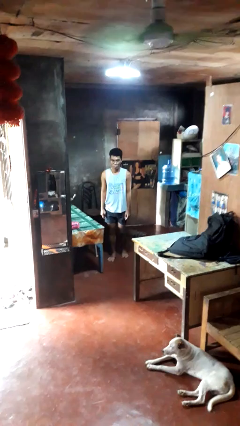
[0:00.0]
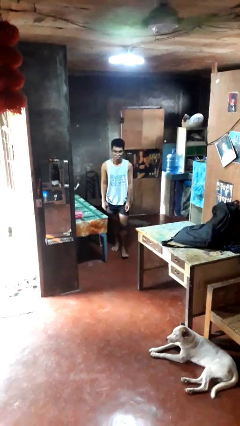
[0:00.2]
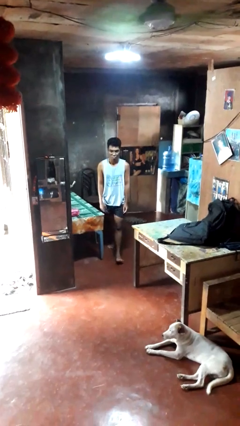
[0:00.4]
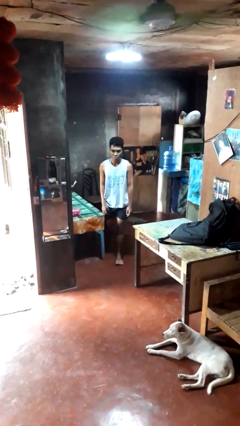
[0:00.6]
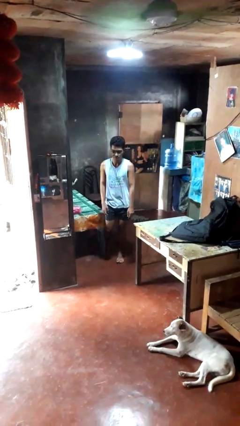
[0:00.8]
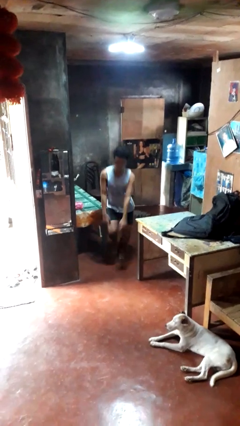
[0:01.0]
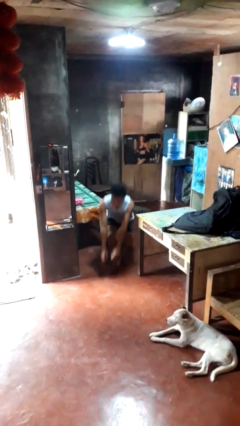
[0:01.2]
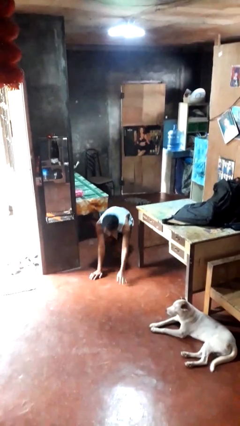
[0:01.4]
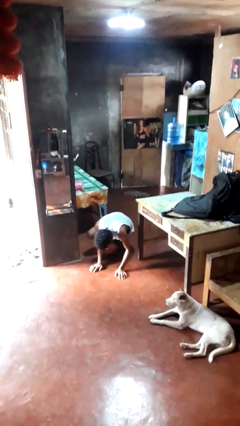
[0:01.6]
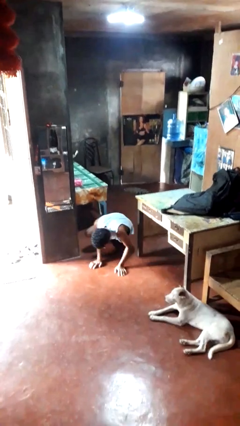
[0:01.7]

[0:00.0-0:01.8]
person trips on object on floor

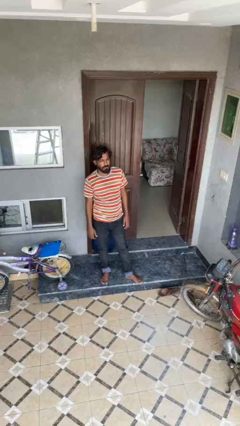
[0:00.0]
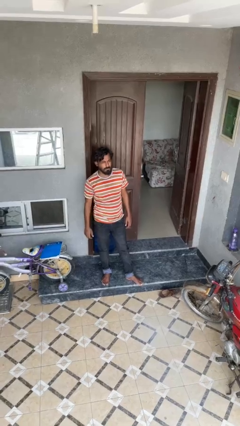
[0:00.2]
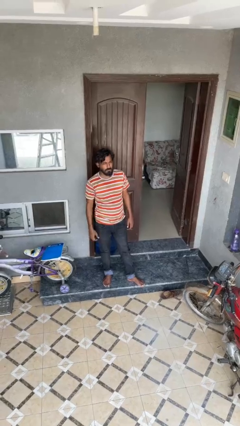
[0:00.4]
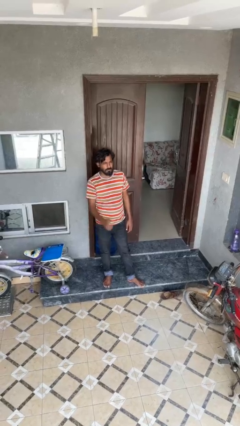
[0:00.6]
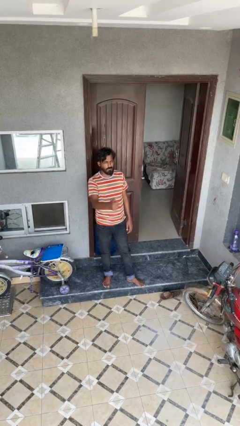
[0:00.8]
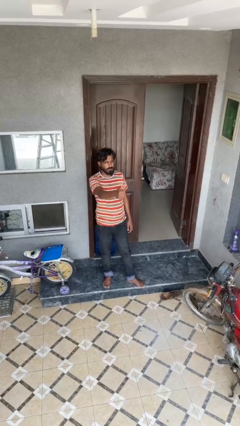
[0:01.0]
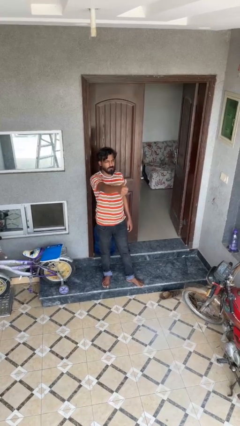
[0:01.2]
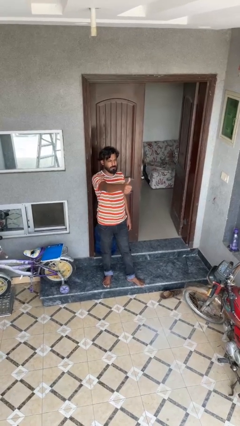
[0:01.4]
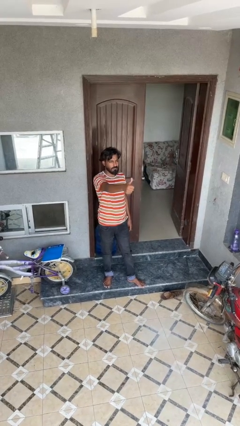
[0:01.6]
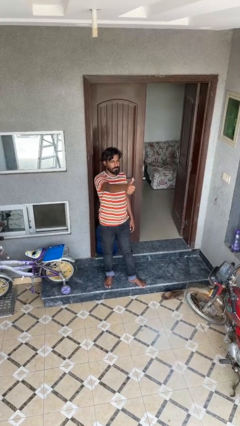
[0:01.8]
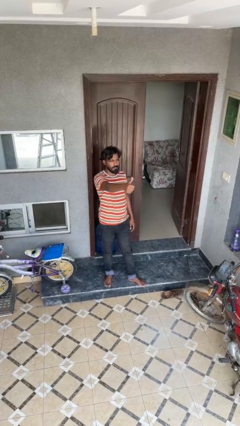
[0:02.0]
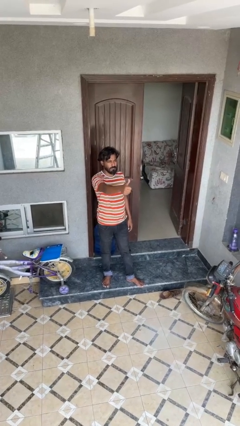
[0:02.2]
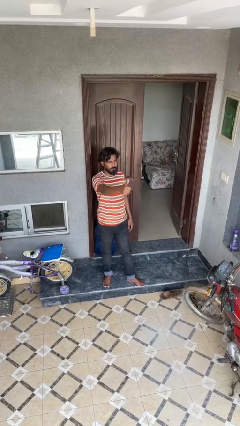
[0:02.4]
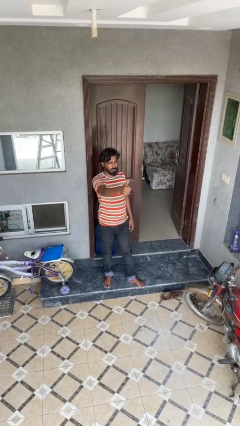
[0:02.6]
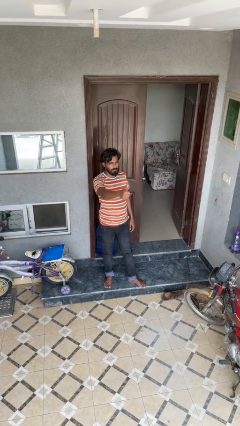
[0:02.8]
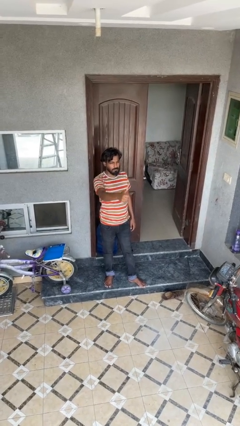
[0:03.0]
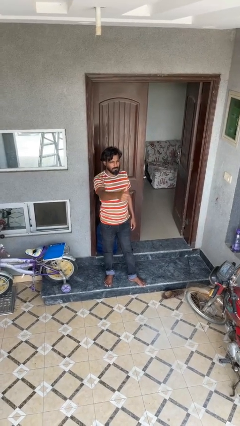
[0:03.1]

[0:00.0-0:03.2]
person gestures thumbs up

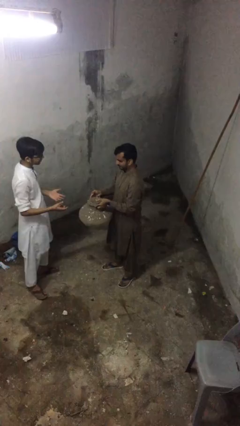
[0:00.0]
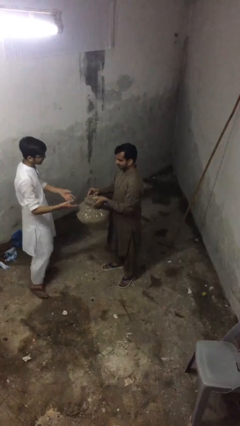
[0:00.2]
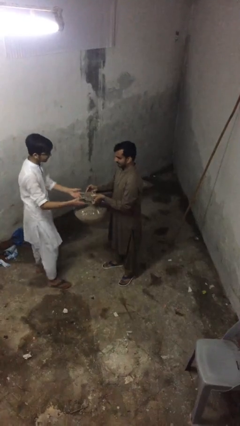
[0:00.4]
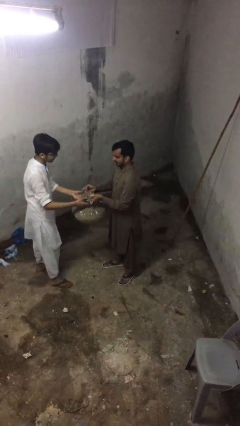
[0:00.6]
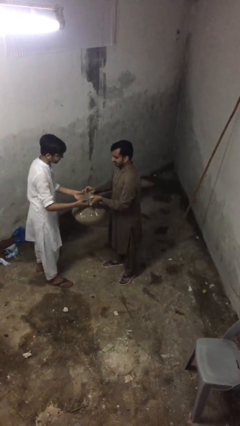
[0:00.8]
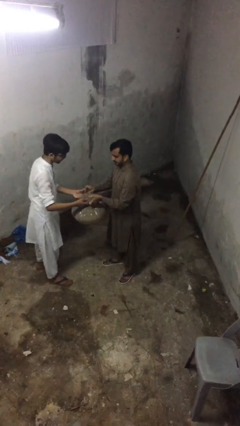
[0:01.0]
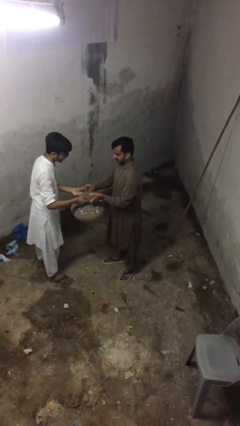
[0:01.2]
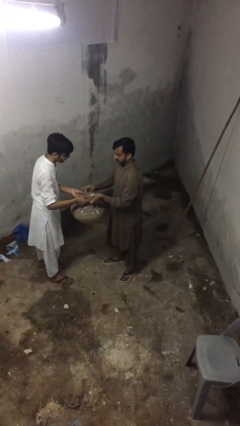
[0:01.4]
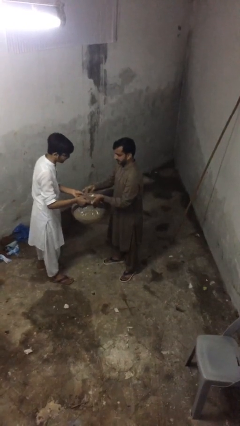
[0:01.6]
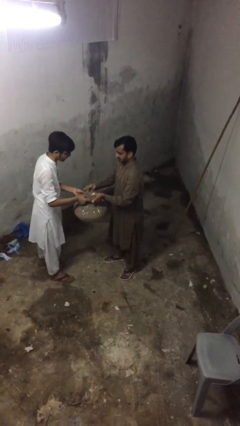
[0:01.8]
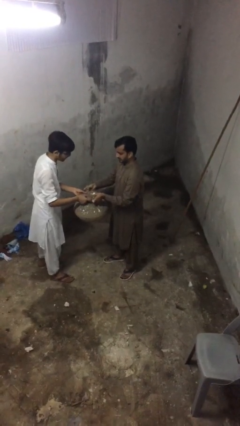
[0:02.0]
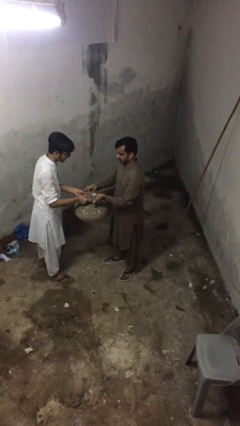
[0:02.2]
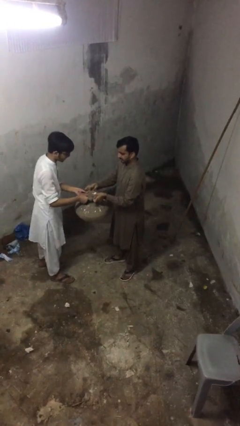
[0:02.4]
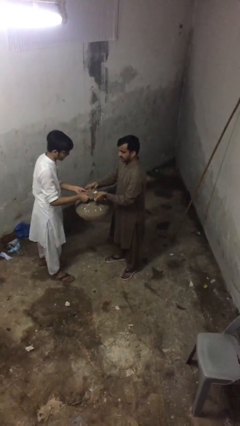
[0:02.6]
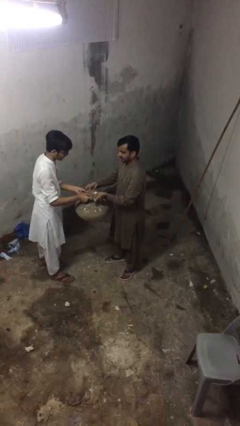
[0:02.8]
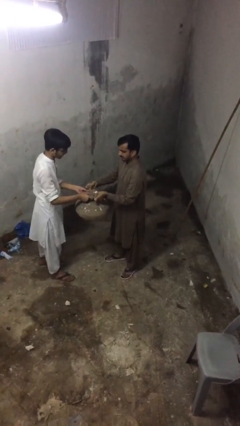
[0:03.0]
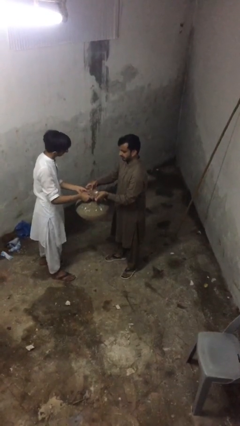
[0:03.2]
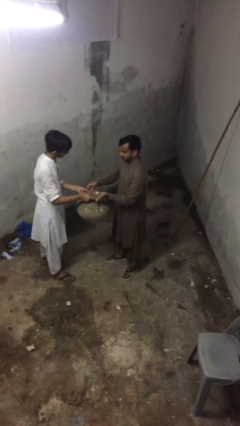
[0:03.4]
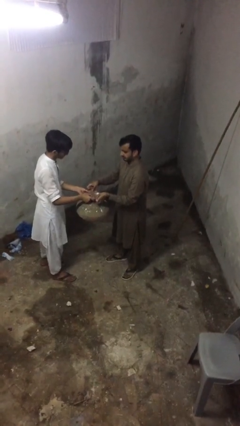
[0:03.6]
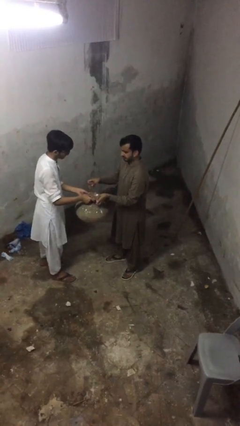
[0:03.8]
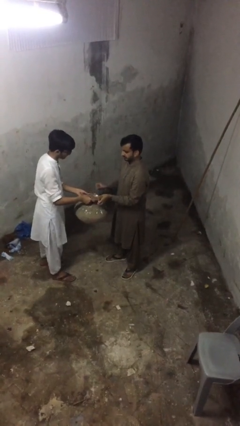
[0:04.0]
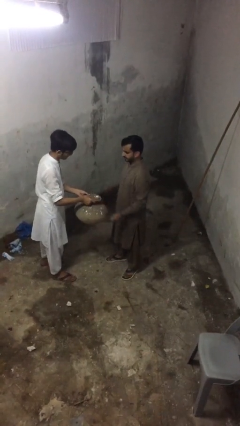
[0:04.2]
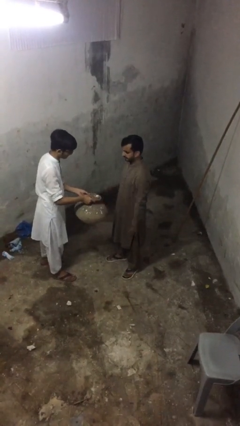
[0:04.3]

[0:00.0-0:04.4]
person transfers object to person

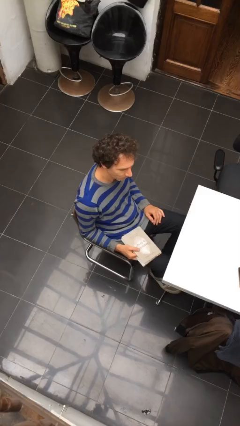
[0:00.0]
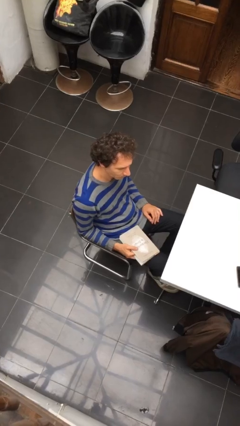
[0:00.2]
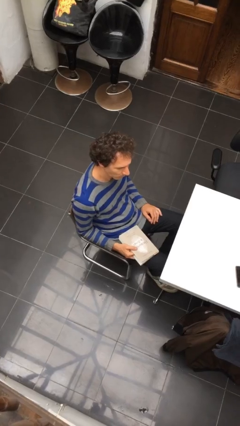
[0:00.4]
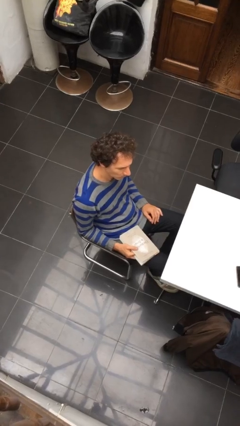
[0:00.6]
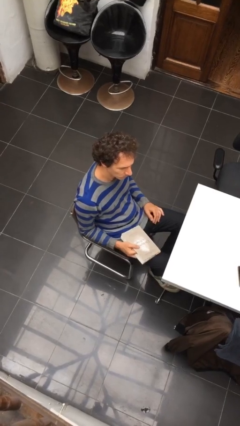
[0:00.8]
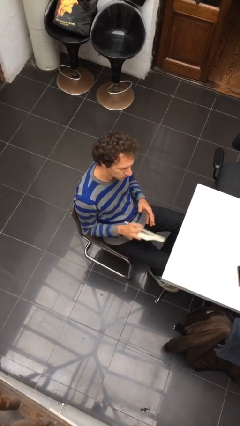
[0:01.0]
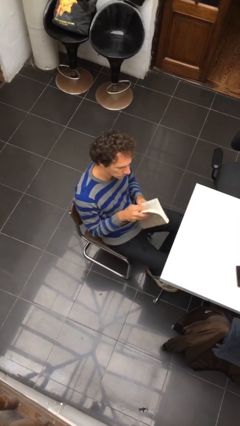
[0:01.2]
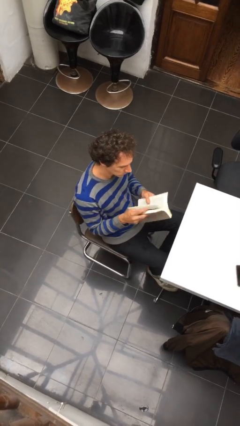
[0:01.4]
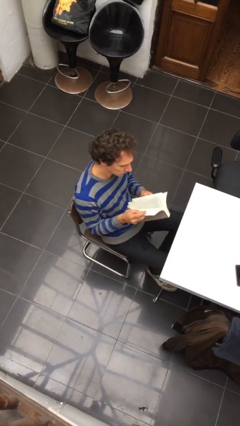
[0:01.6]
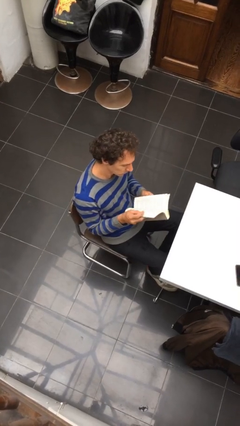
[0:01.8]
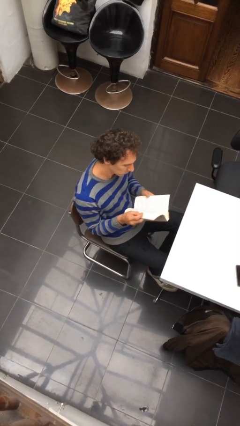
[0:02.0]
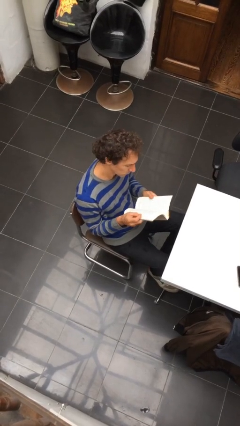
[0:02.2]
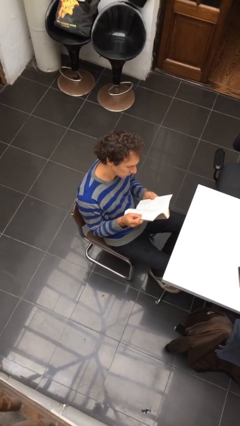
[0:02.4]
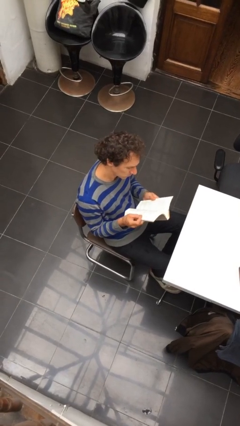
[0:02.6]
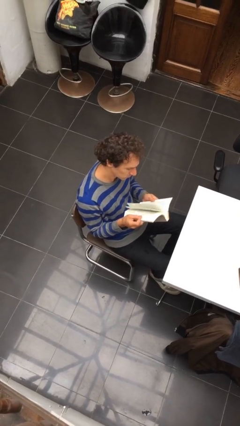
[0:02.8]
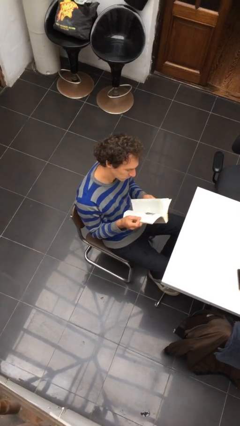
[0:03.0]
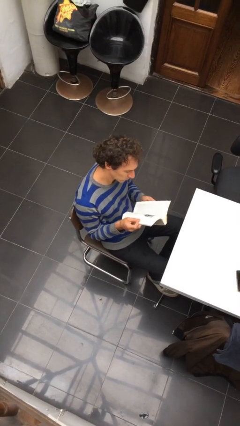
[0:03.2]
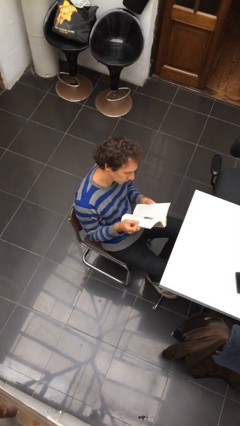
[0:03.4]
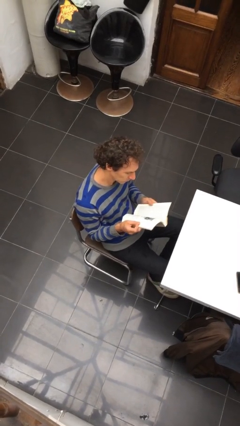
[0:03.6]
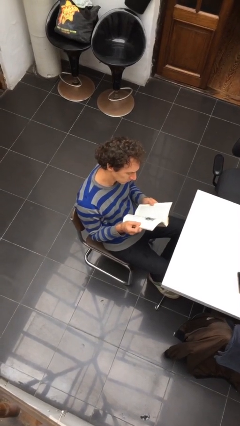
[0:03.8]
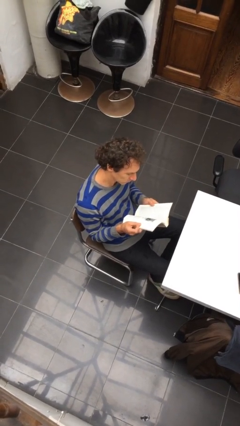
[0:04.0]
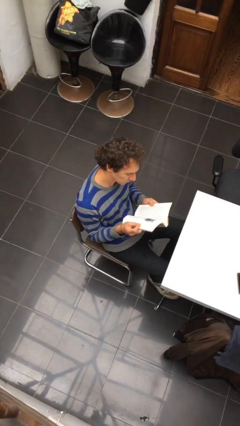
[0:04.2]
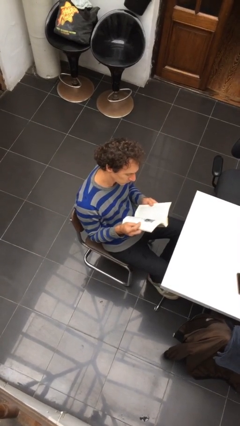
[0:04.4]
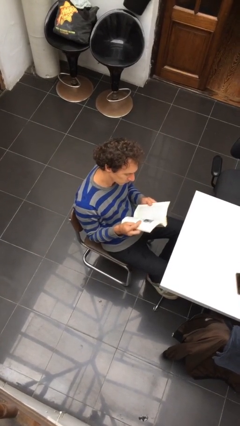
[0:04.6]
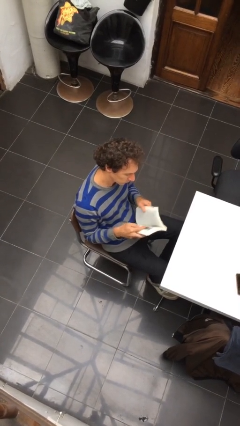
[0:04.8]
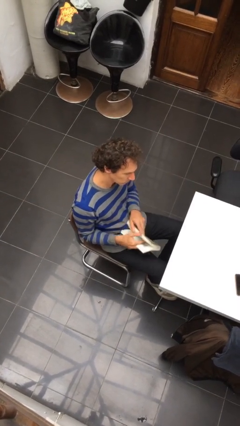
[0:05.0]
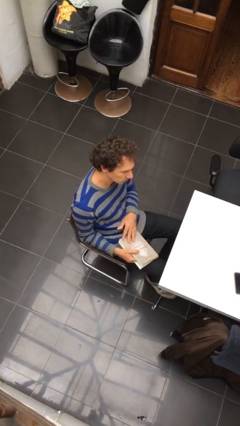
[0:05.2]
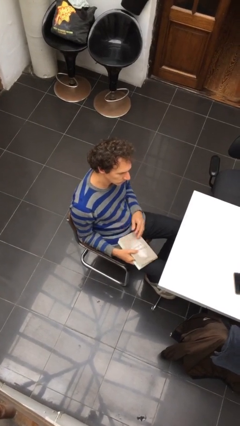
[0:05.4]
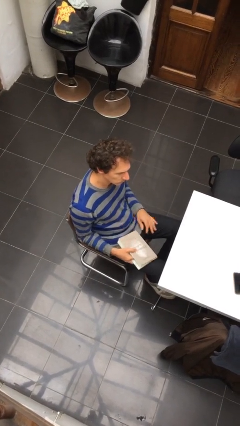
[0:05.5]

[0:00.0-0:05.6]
person reads document

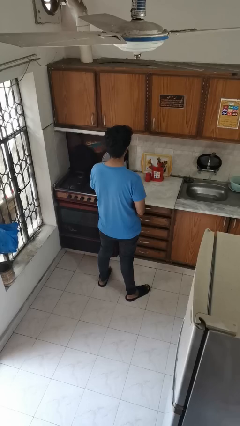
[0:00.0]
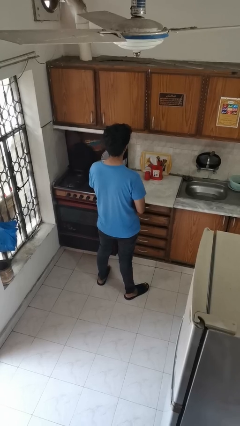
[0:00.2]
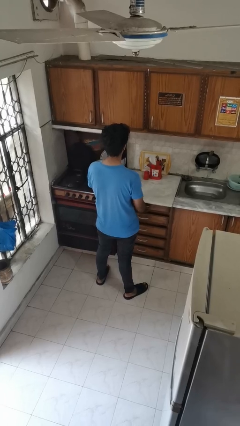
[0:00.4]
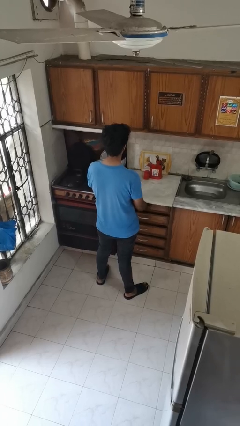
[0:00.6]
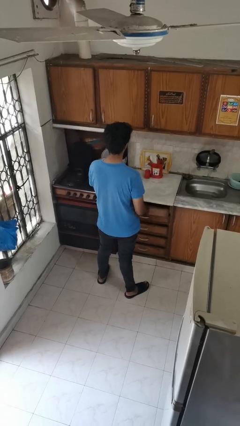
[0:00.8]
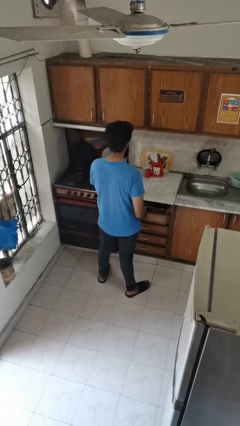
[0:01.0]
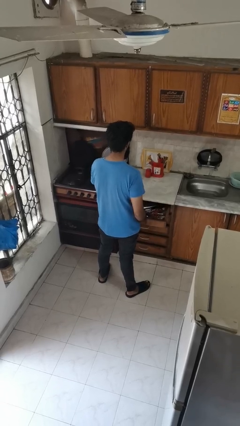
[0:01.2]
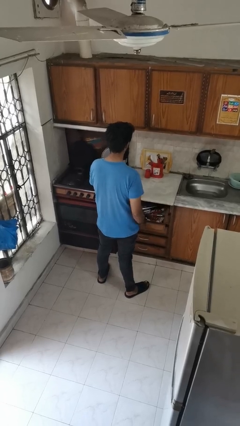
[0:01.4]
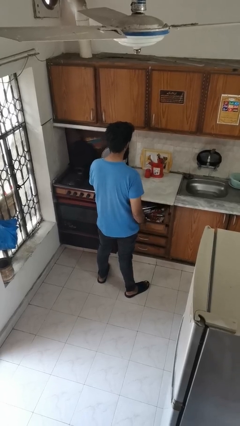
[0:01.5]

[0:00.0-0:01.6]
person opens kitchen drawer

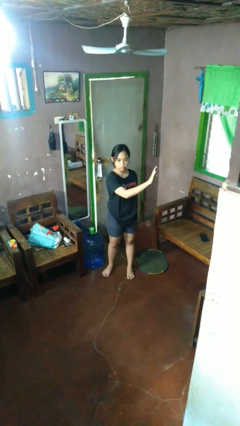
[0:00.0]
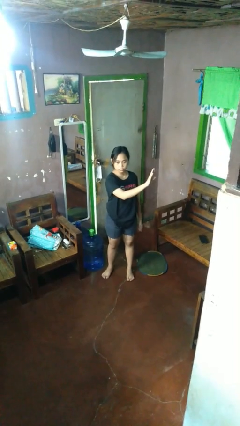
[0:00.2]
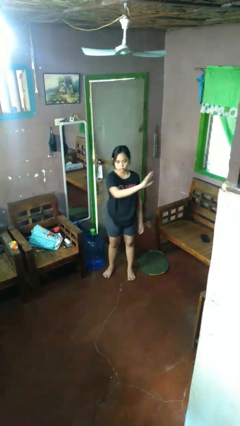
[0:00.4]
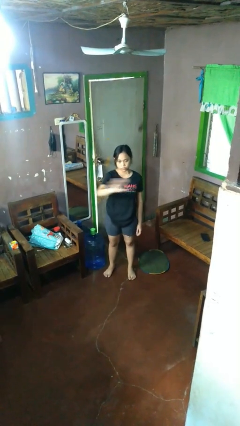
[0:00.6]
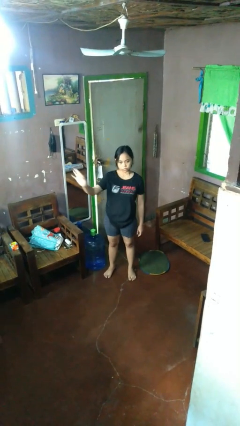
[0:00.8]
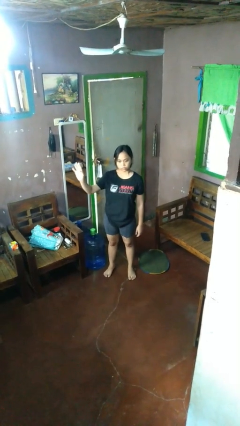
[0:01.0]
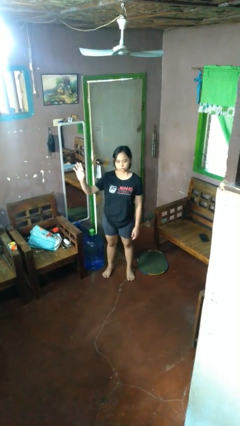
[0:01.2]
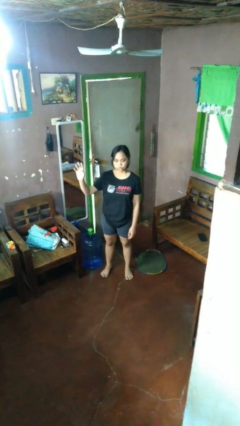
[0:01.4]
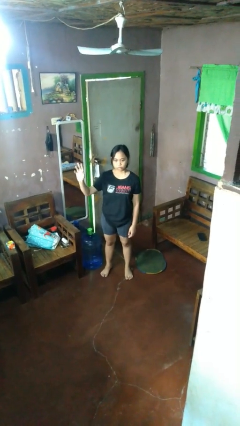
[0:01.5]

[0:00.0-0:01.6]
person gestures swipe right
